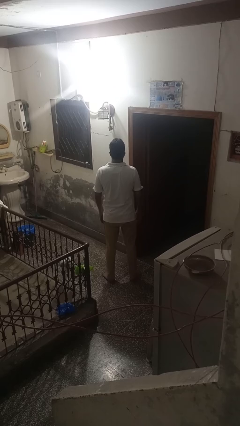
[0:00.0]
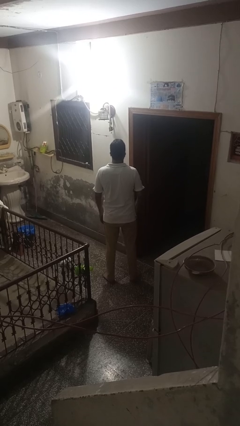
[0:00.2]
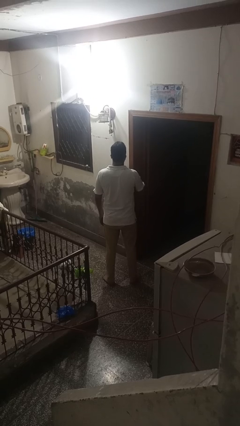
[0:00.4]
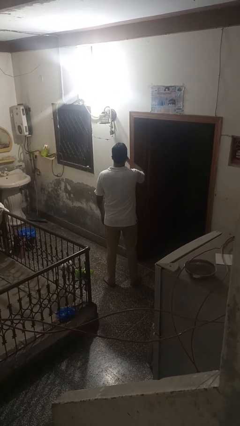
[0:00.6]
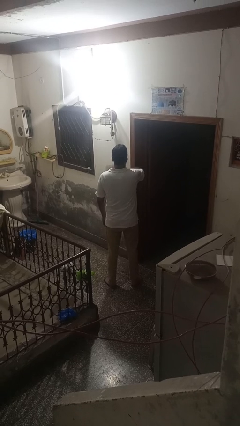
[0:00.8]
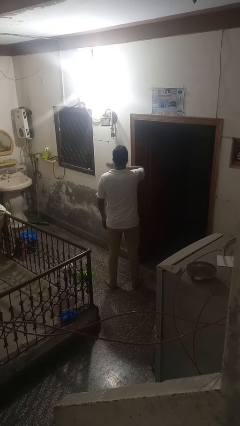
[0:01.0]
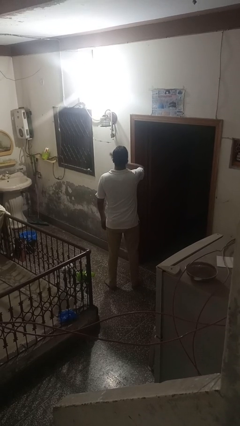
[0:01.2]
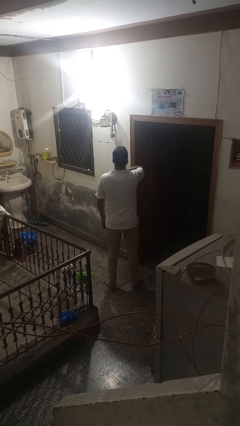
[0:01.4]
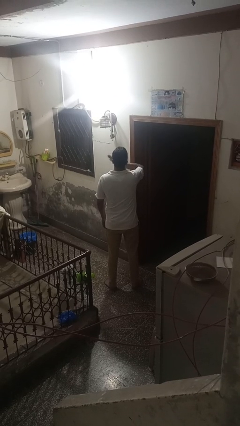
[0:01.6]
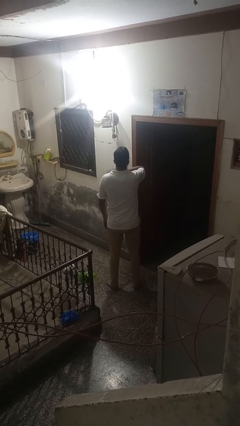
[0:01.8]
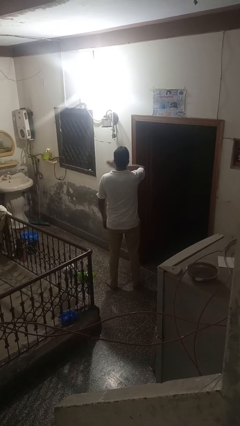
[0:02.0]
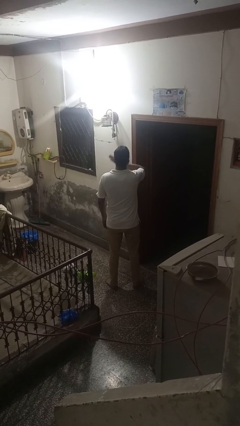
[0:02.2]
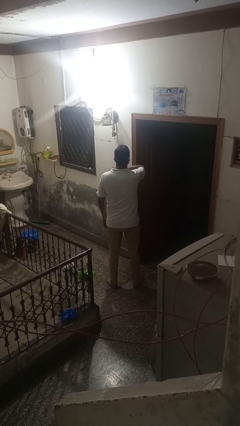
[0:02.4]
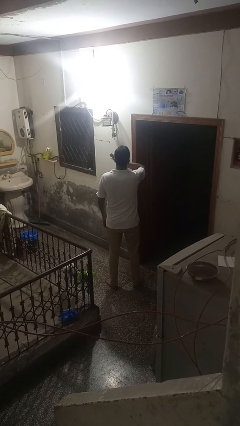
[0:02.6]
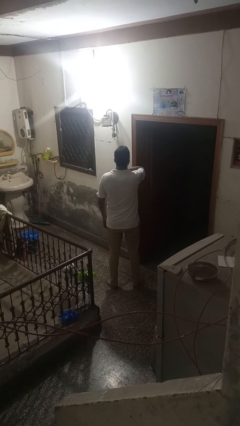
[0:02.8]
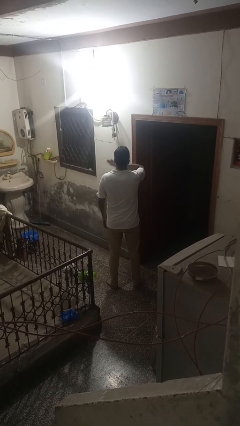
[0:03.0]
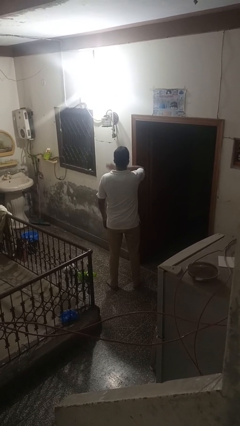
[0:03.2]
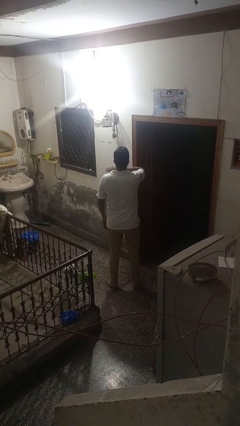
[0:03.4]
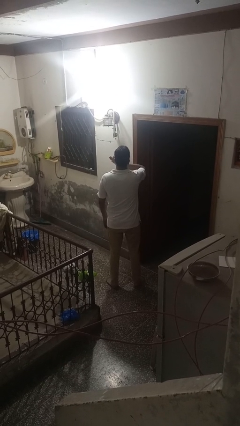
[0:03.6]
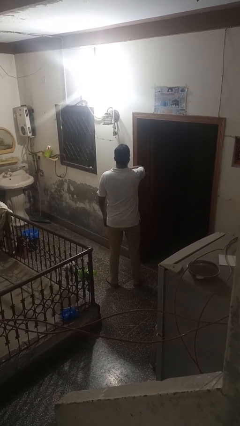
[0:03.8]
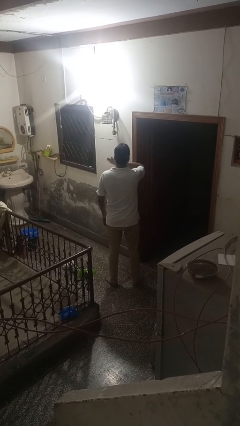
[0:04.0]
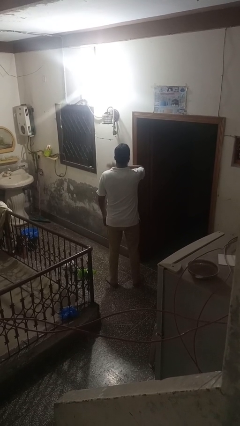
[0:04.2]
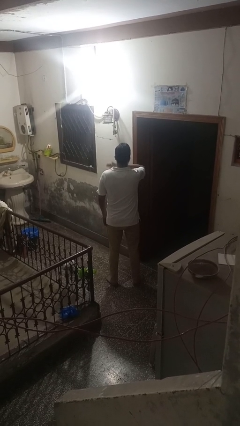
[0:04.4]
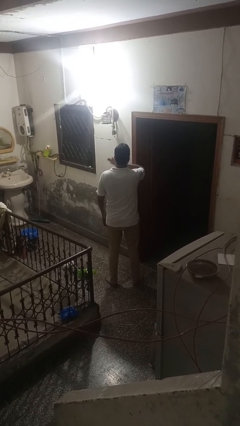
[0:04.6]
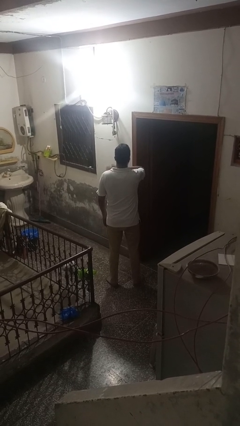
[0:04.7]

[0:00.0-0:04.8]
person drums on chest

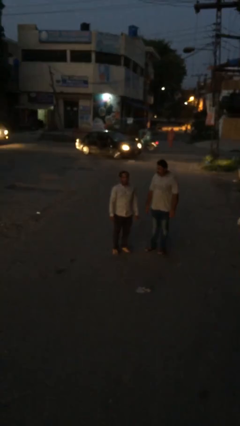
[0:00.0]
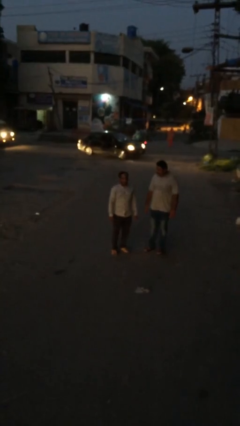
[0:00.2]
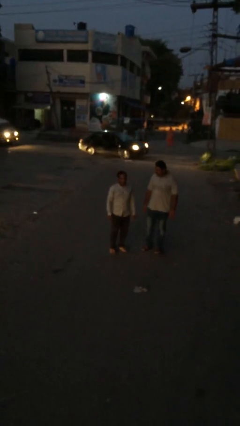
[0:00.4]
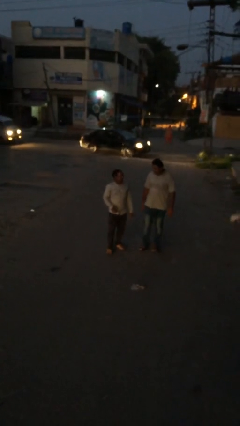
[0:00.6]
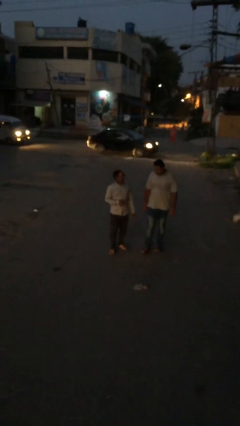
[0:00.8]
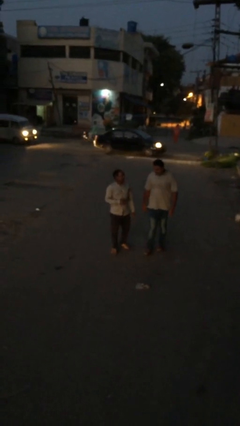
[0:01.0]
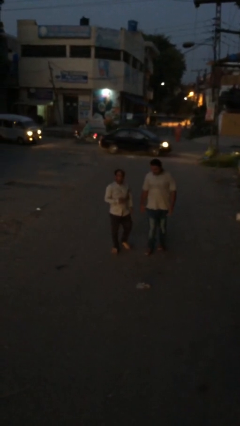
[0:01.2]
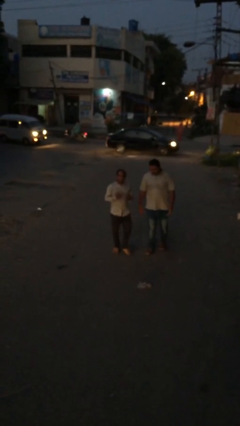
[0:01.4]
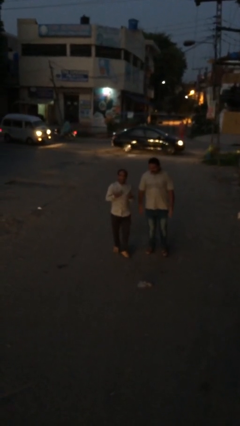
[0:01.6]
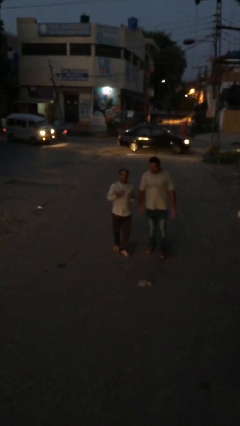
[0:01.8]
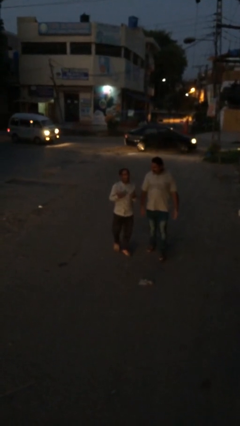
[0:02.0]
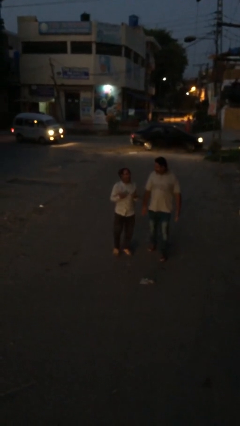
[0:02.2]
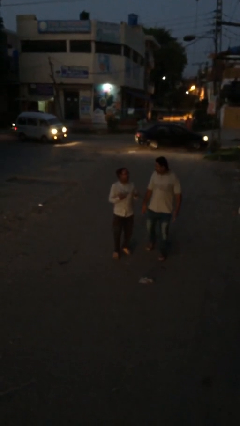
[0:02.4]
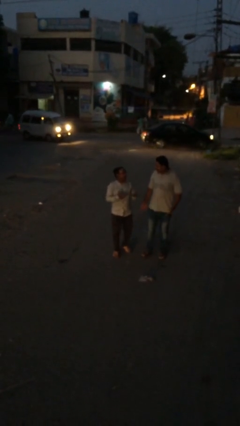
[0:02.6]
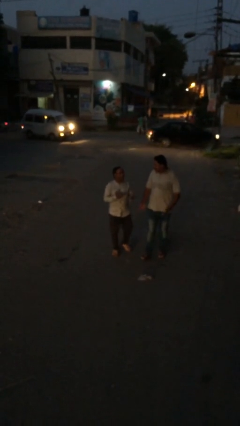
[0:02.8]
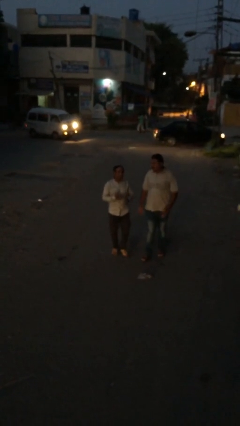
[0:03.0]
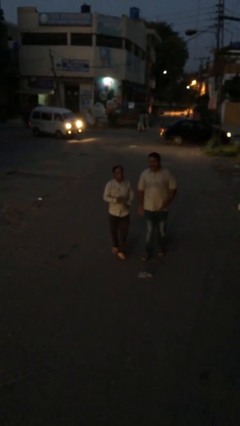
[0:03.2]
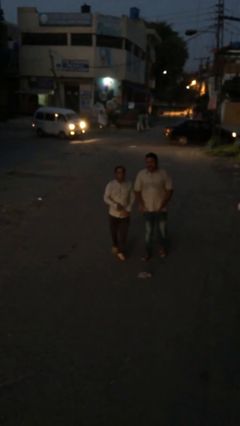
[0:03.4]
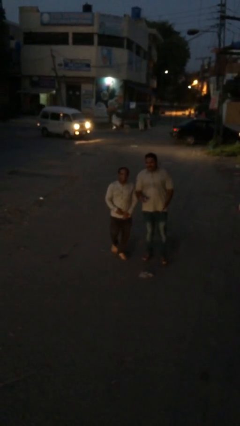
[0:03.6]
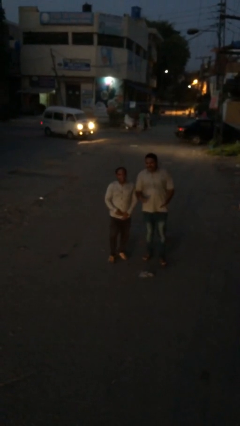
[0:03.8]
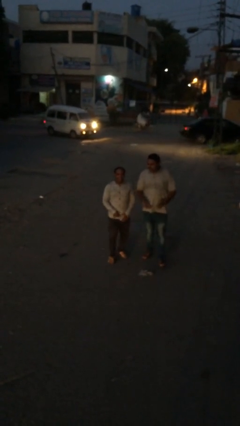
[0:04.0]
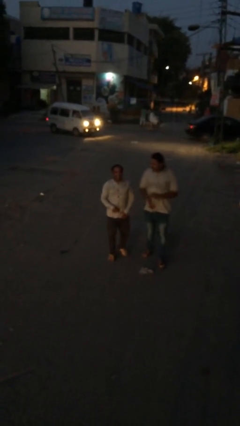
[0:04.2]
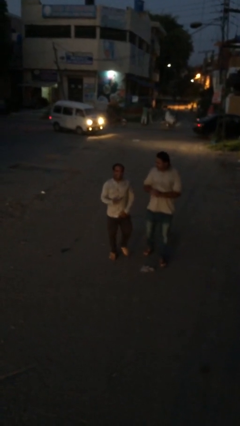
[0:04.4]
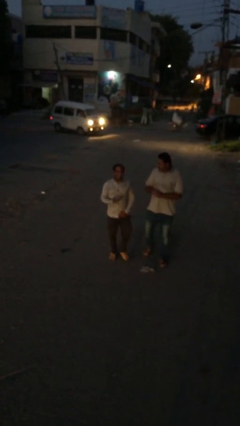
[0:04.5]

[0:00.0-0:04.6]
person talks to person

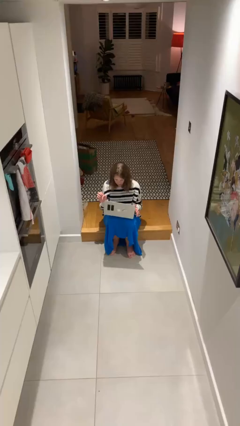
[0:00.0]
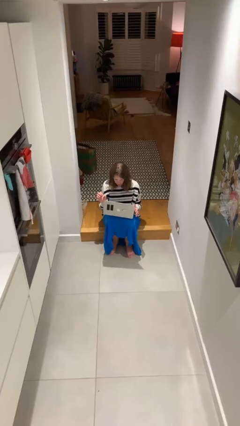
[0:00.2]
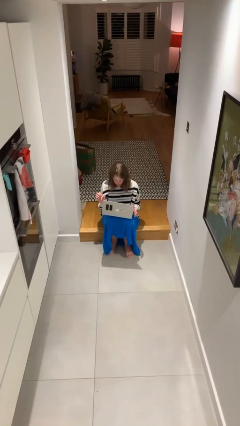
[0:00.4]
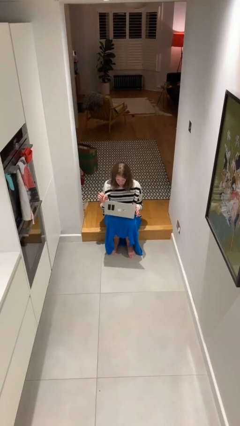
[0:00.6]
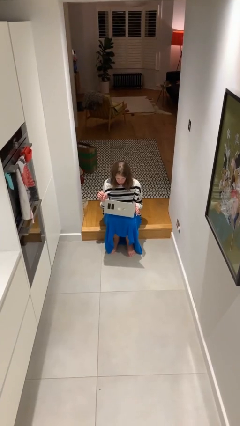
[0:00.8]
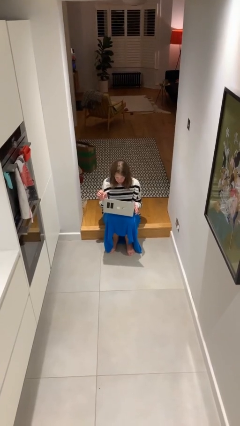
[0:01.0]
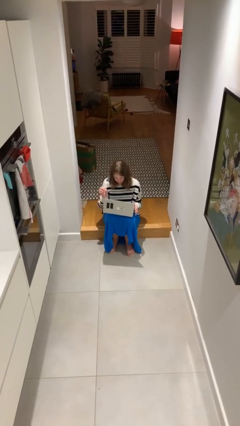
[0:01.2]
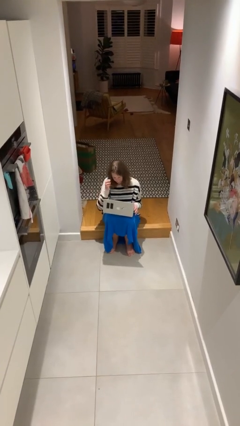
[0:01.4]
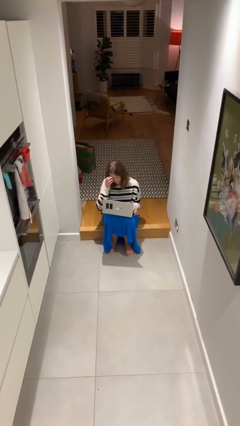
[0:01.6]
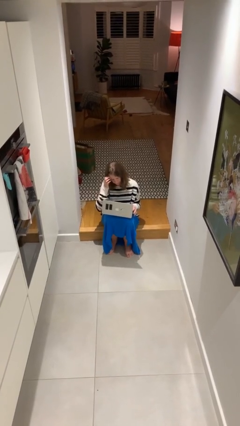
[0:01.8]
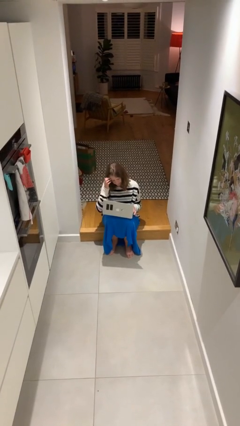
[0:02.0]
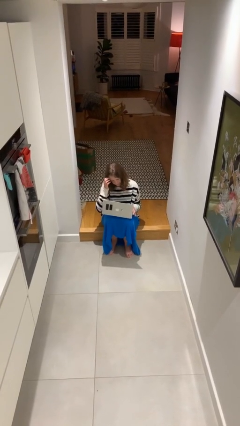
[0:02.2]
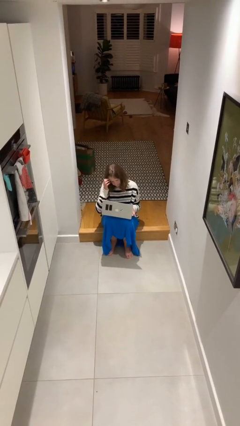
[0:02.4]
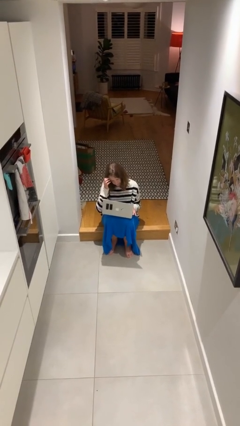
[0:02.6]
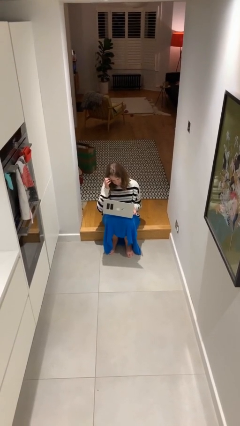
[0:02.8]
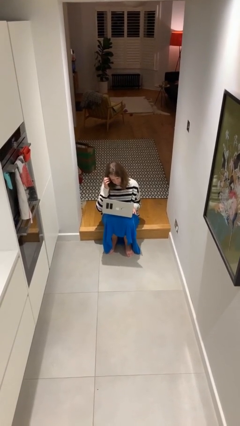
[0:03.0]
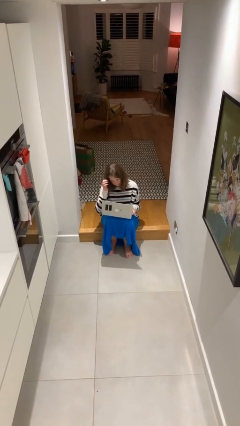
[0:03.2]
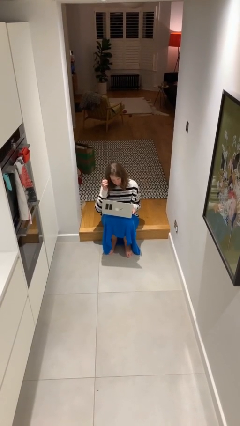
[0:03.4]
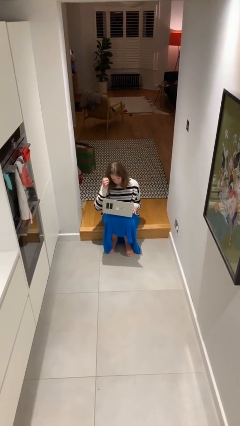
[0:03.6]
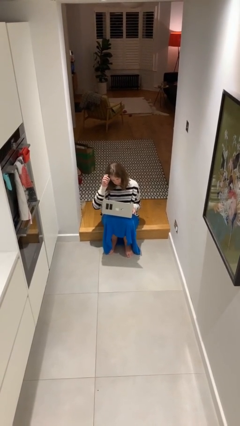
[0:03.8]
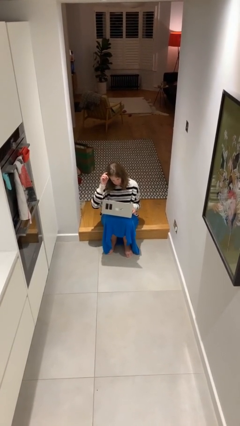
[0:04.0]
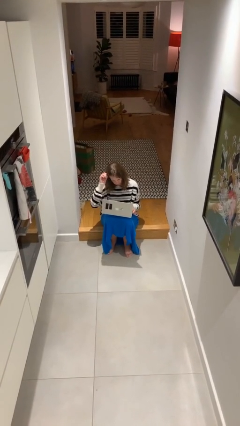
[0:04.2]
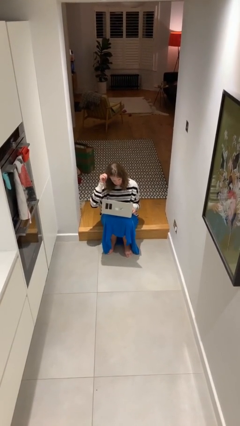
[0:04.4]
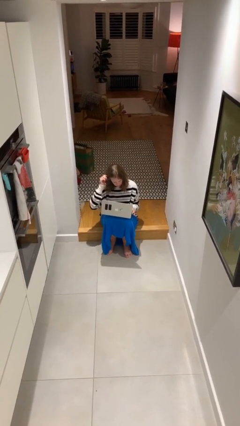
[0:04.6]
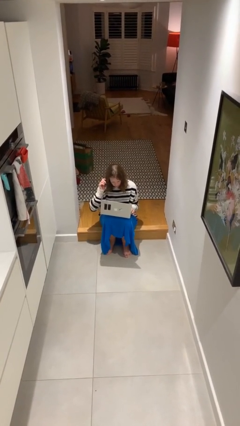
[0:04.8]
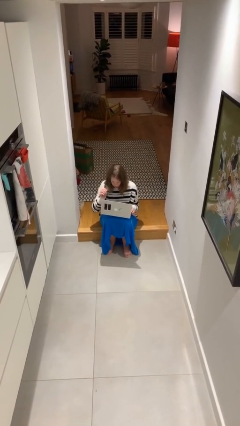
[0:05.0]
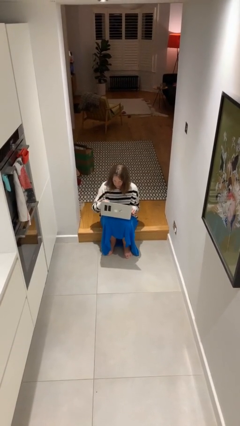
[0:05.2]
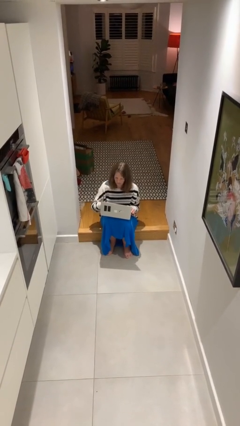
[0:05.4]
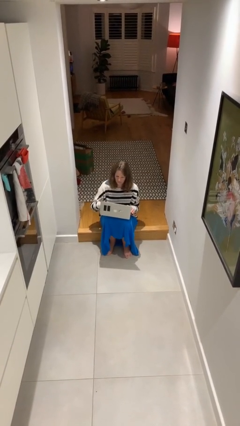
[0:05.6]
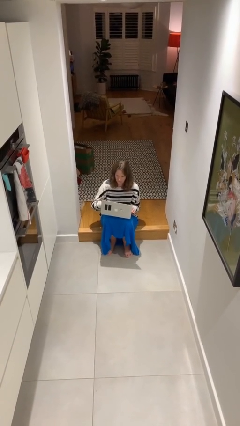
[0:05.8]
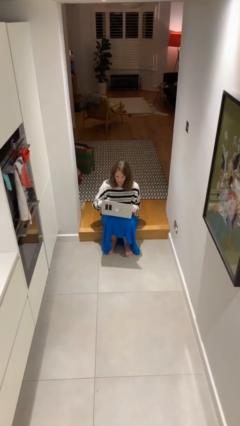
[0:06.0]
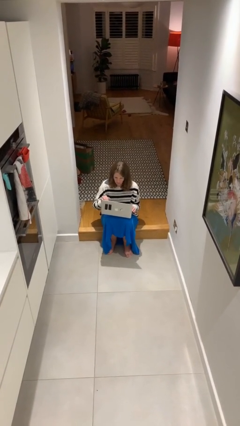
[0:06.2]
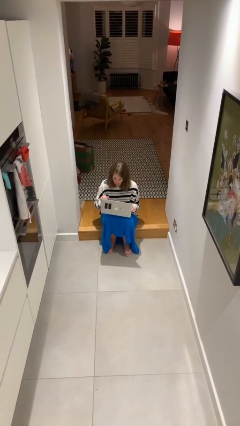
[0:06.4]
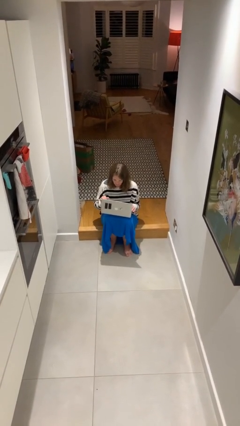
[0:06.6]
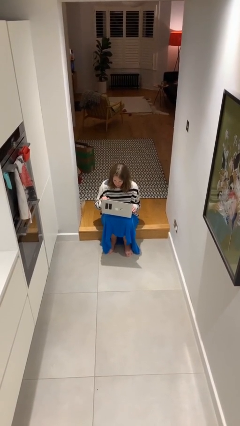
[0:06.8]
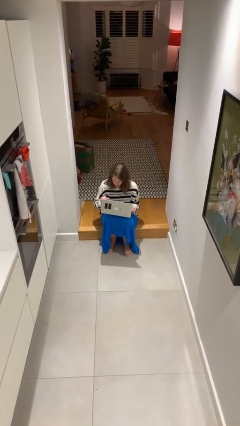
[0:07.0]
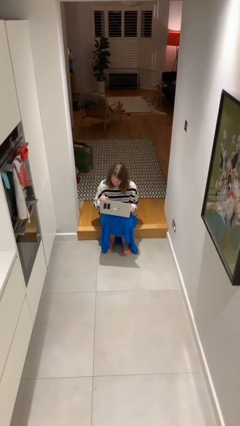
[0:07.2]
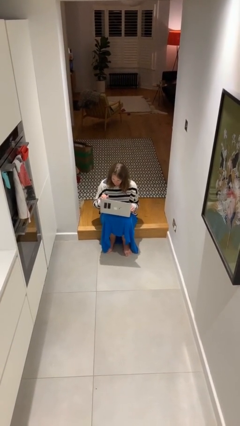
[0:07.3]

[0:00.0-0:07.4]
person interacts with laptop

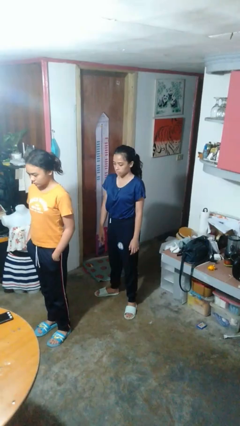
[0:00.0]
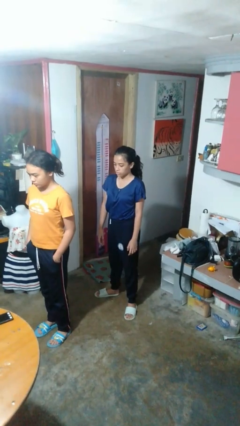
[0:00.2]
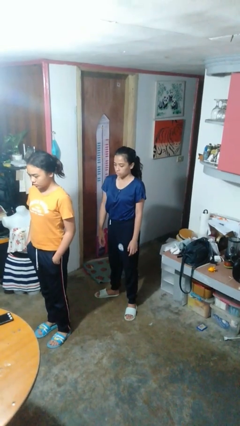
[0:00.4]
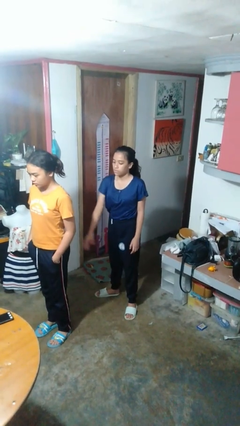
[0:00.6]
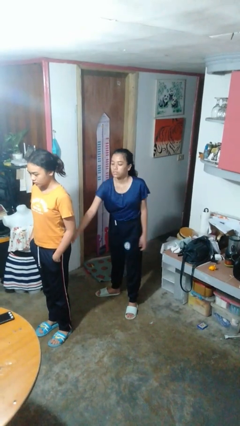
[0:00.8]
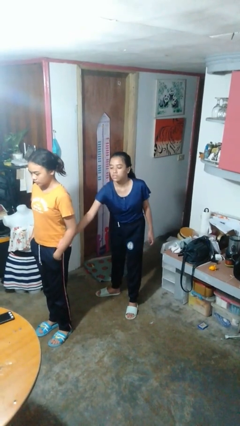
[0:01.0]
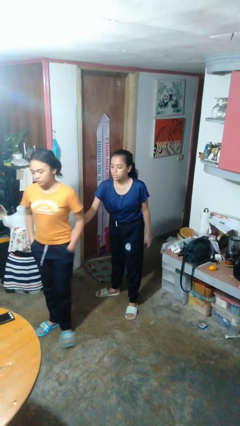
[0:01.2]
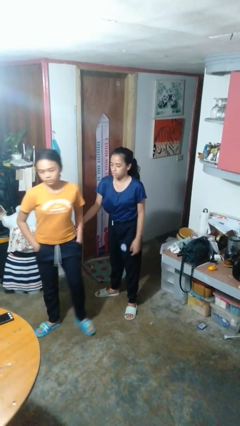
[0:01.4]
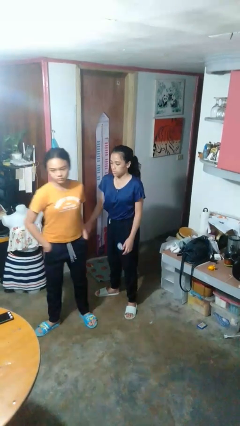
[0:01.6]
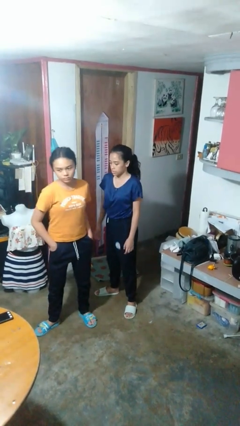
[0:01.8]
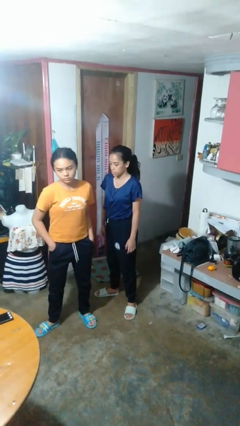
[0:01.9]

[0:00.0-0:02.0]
person grabs person by forearm
